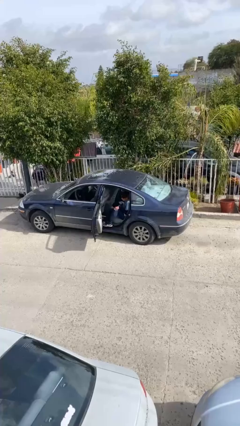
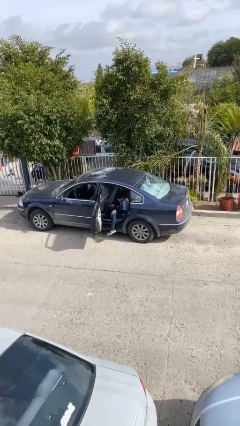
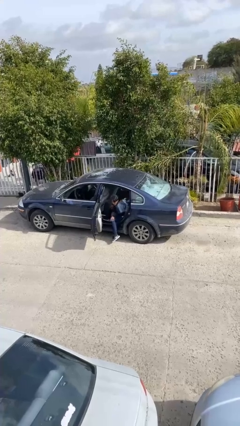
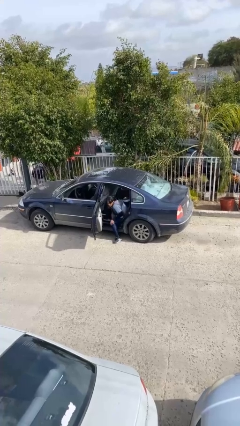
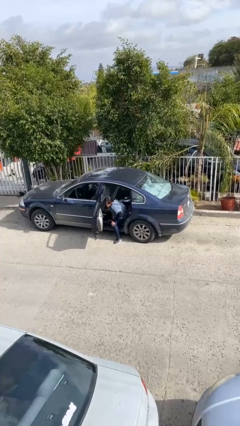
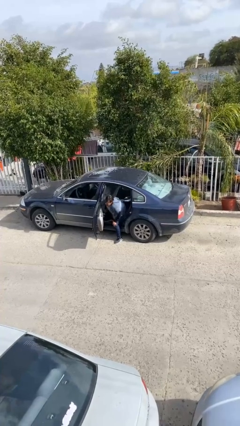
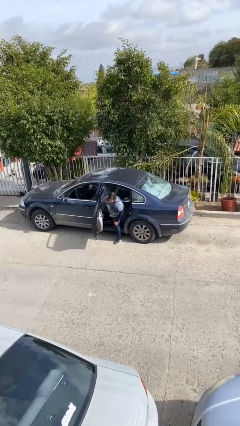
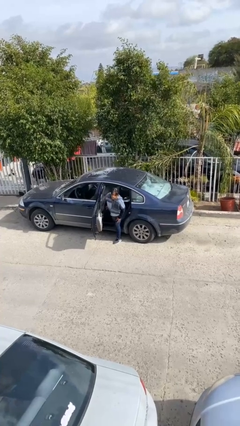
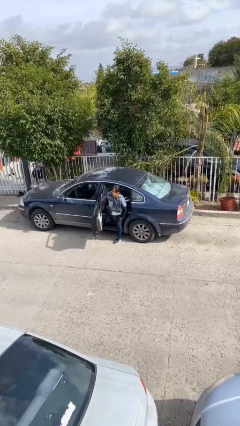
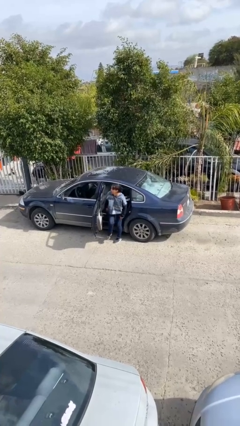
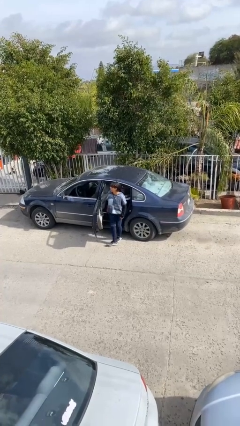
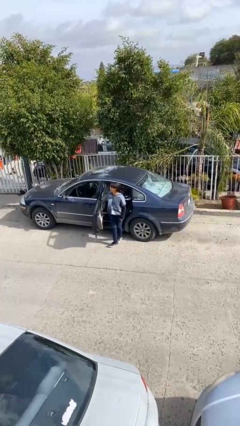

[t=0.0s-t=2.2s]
person exits car

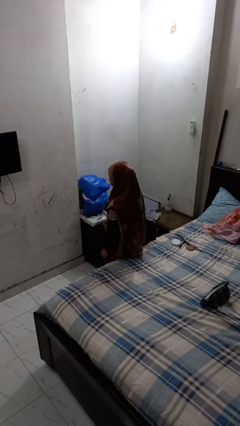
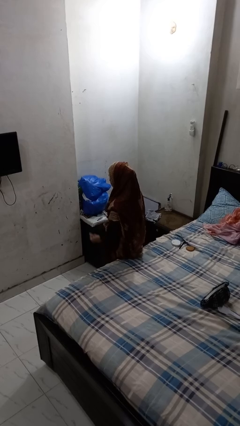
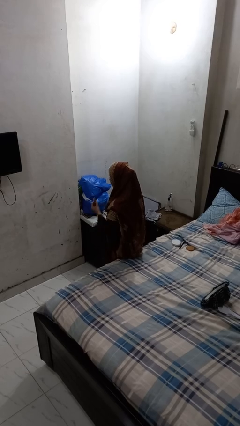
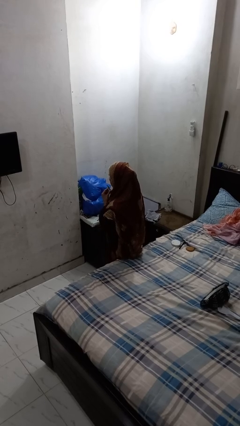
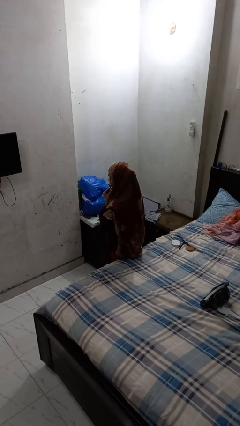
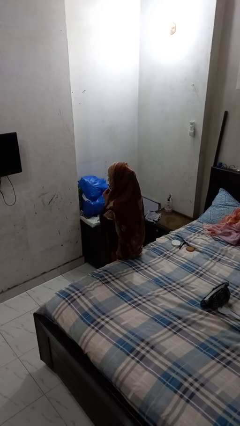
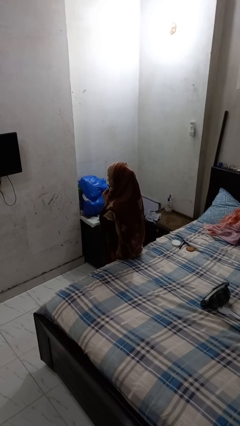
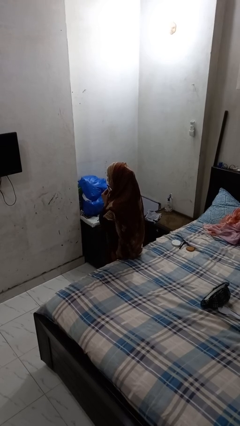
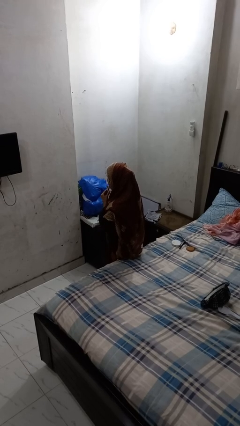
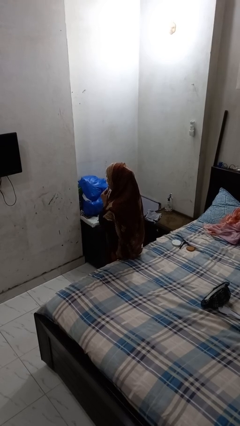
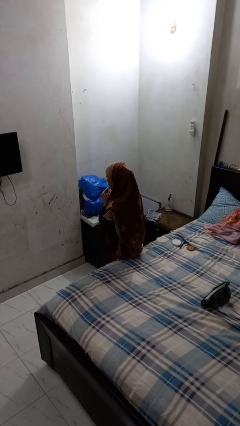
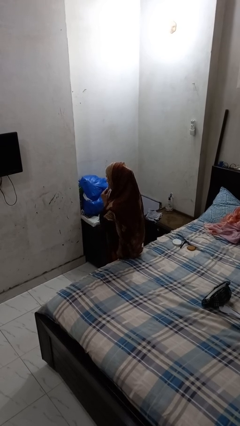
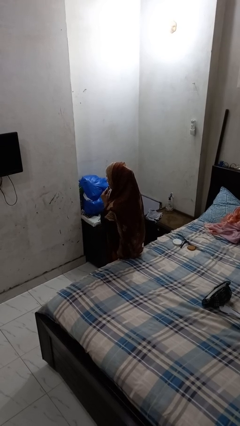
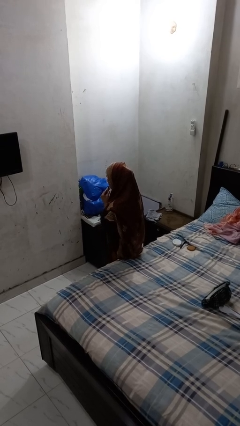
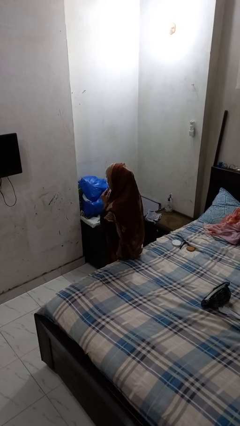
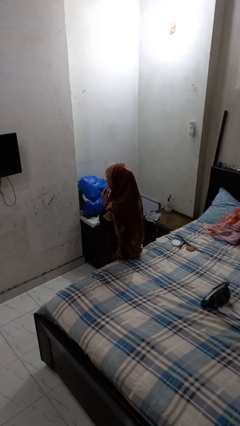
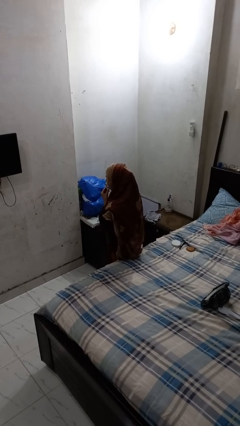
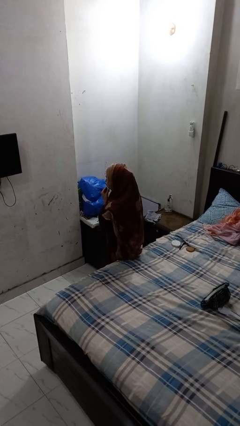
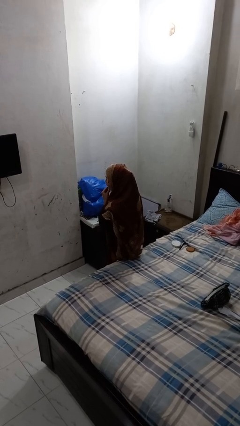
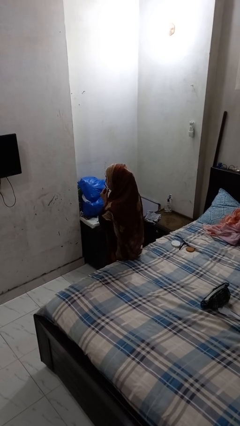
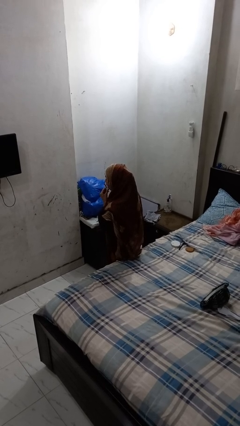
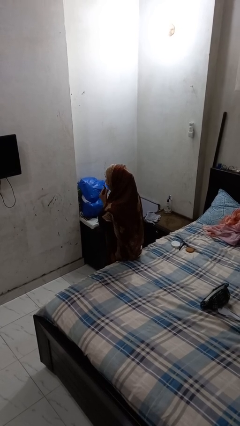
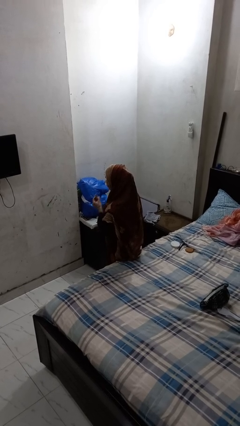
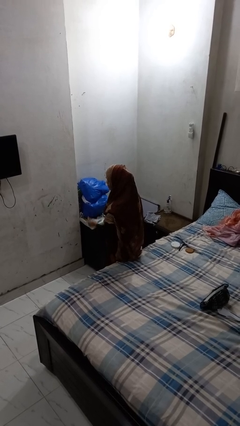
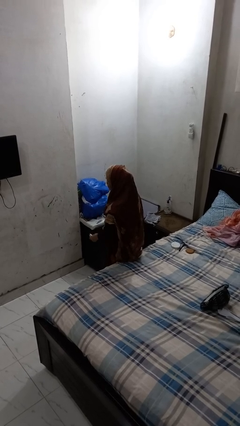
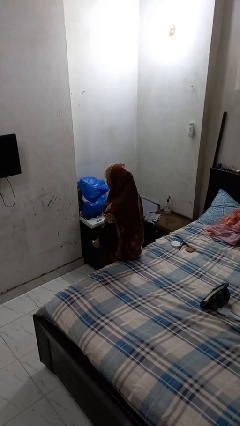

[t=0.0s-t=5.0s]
person applies lip makeup

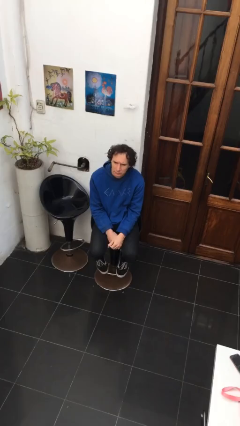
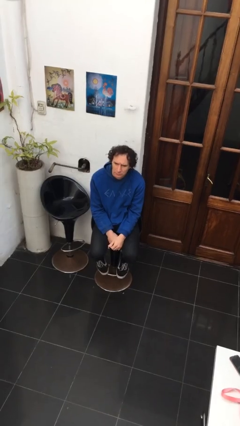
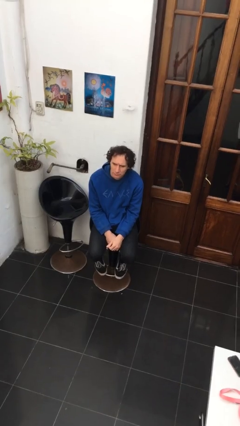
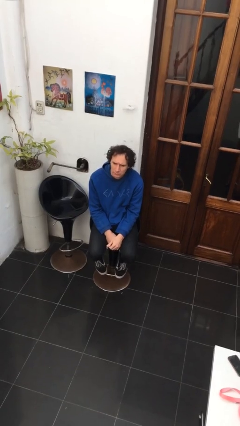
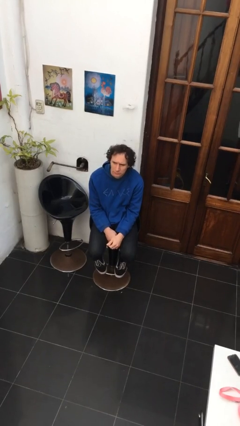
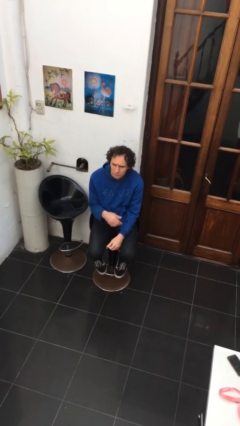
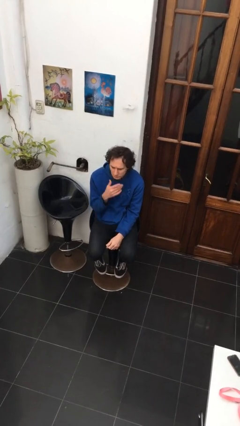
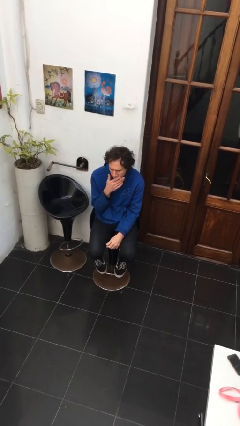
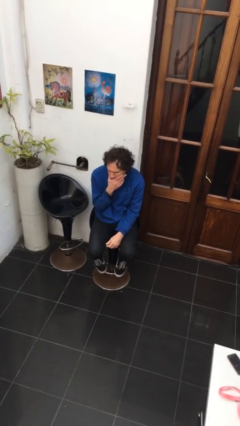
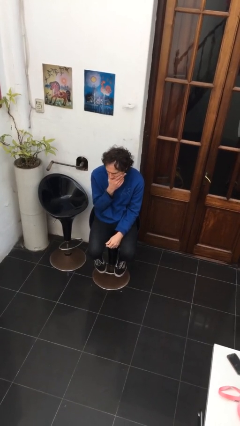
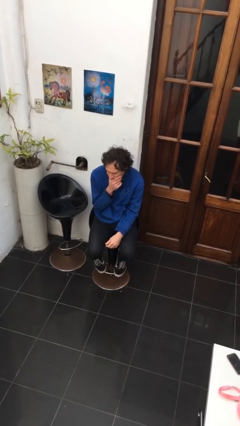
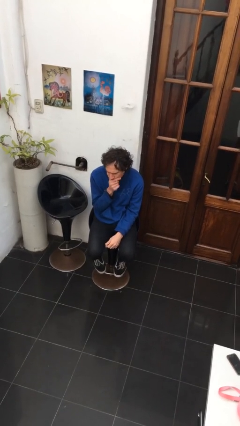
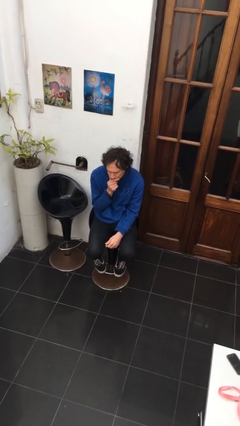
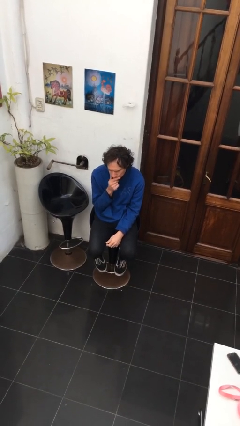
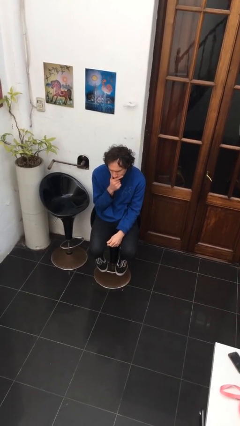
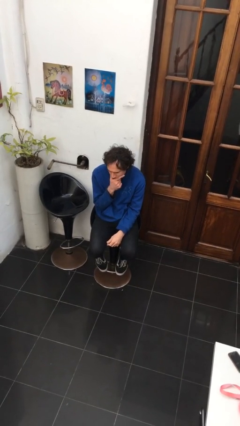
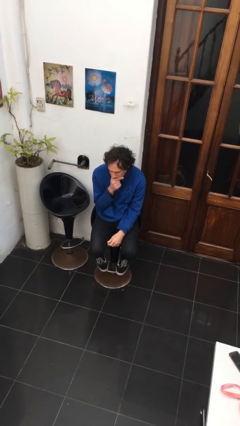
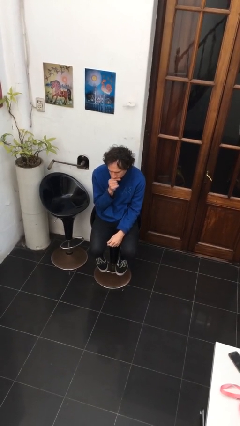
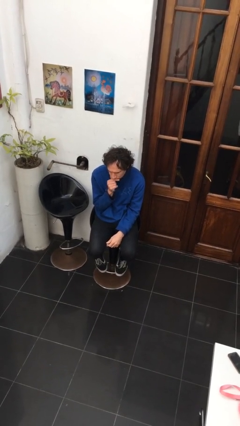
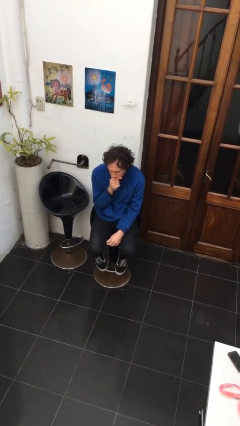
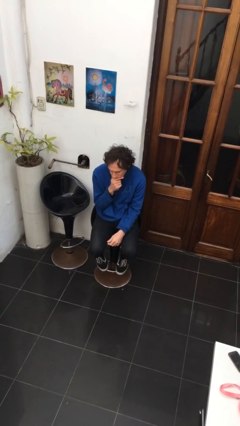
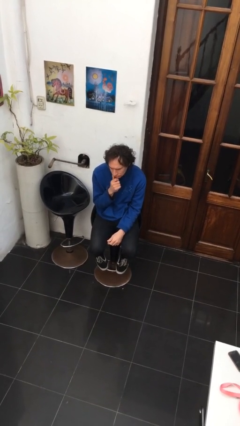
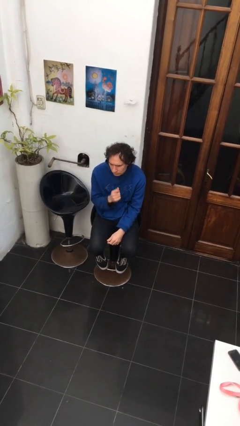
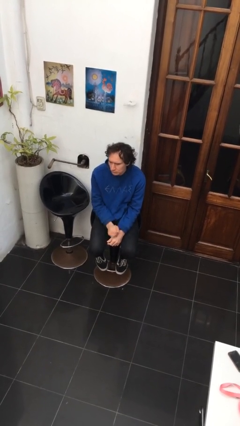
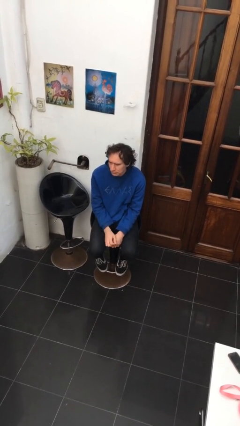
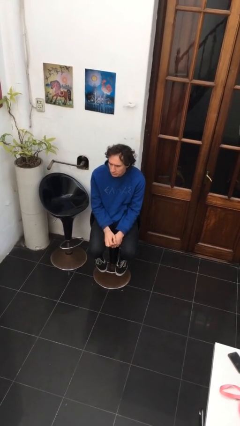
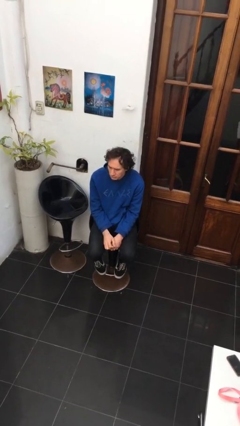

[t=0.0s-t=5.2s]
person strokes chin

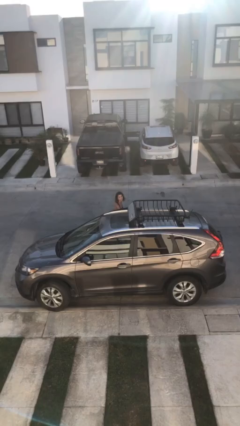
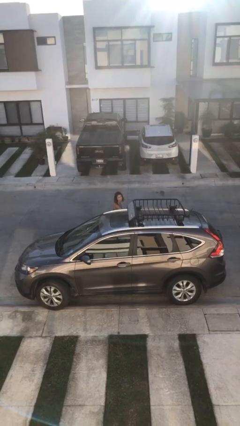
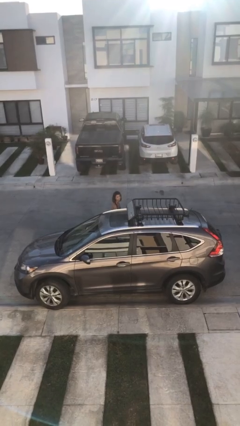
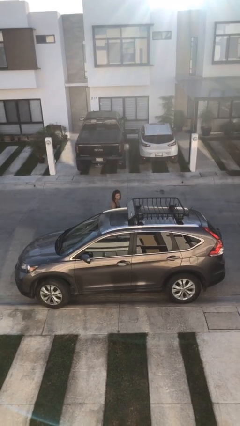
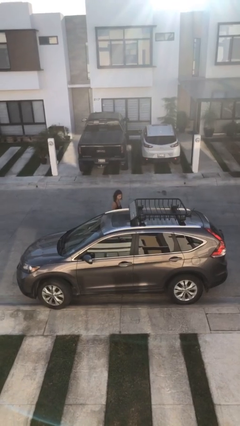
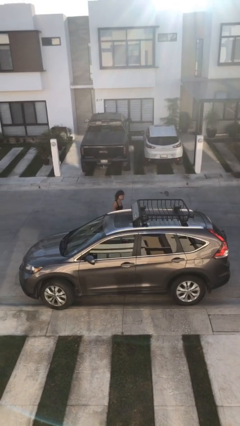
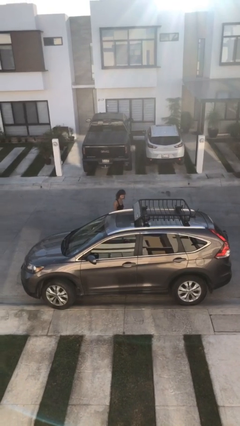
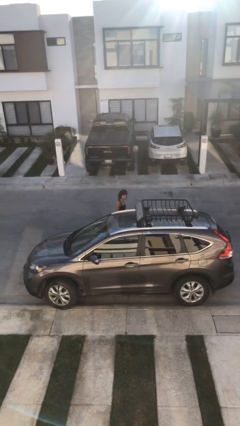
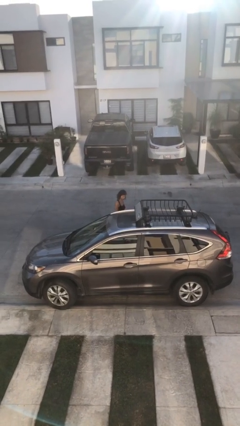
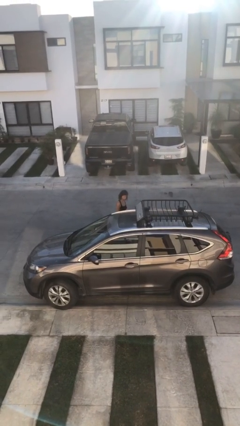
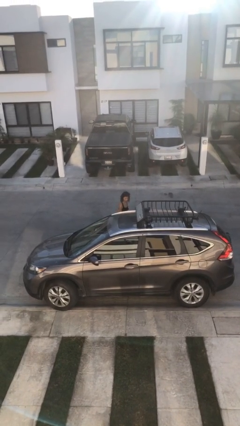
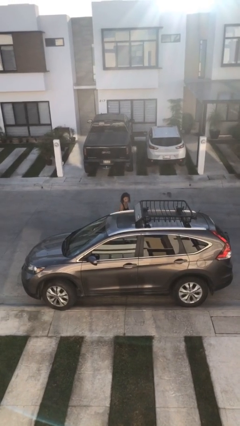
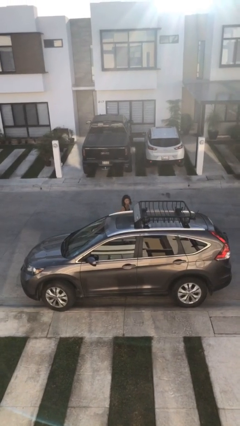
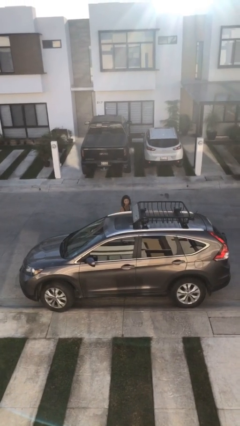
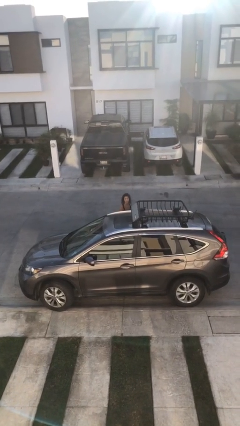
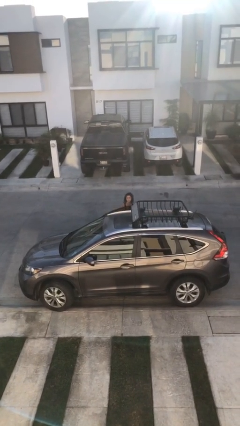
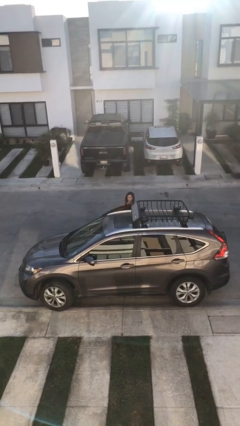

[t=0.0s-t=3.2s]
person opens car door

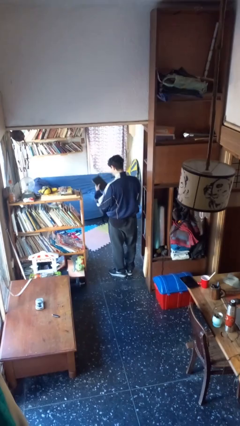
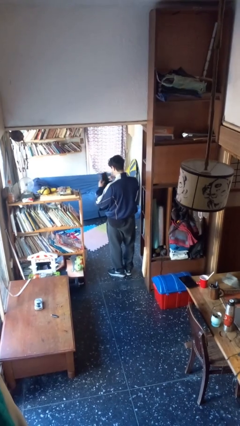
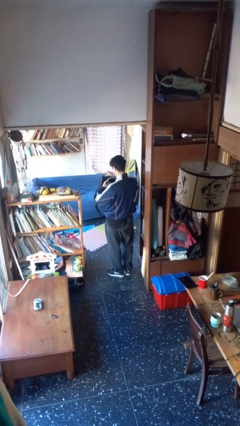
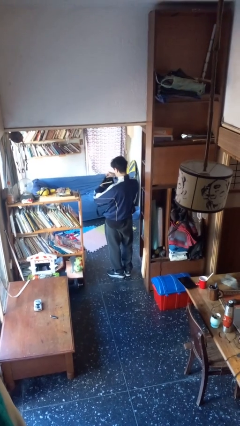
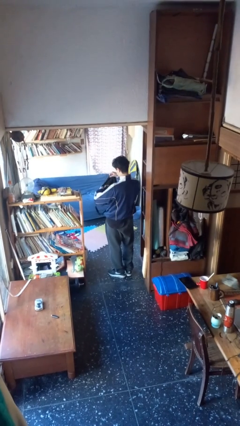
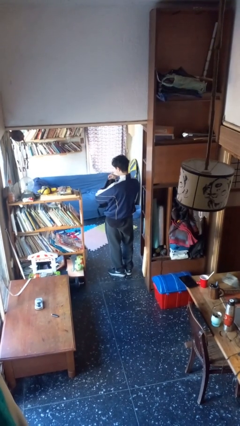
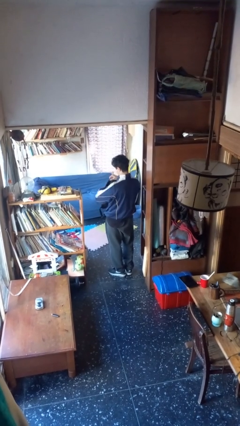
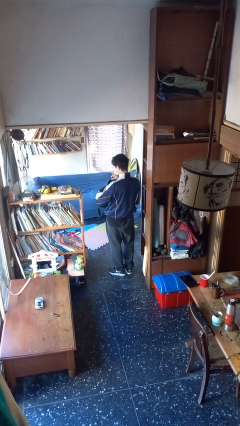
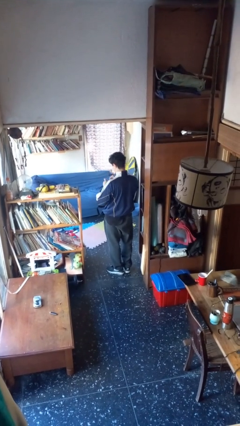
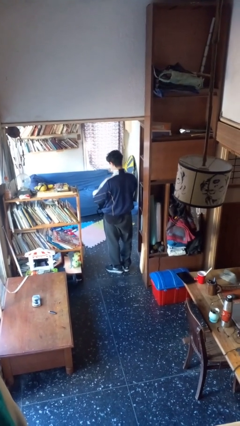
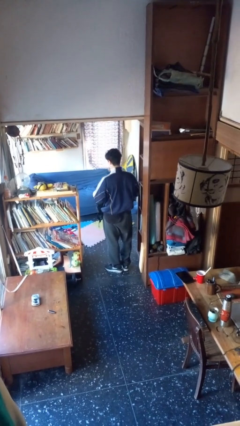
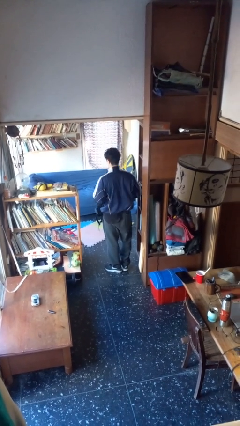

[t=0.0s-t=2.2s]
person puts object into backpack

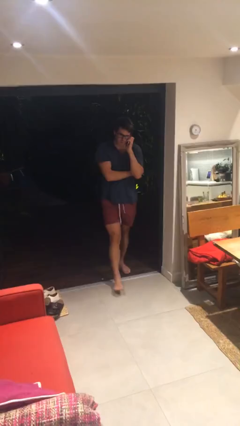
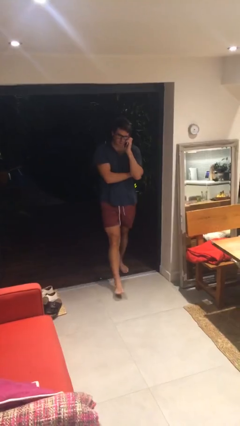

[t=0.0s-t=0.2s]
person enters scene through structure
